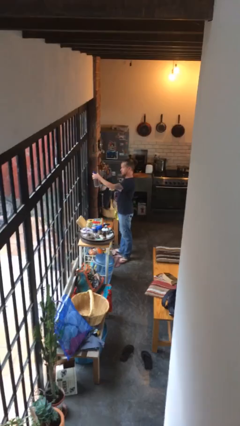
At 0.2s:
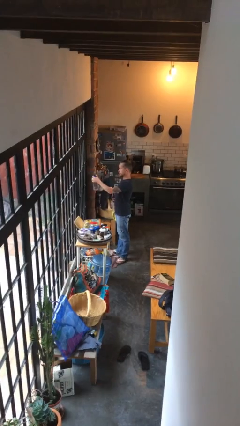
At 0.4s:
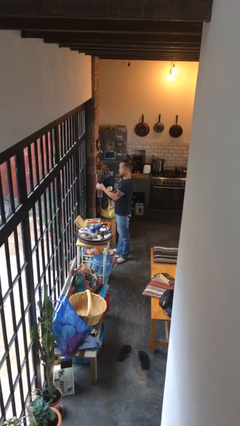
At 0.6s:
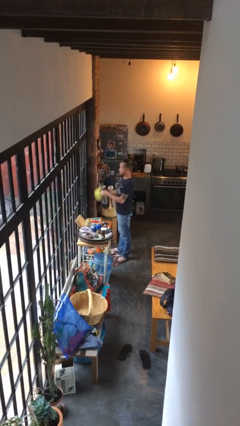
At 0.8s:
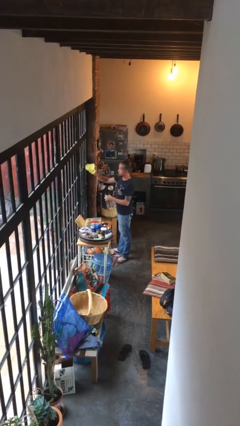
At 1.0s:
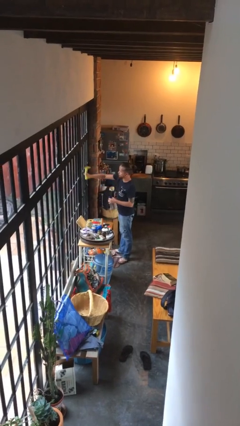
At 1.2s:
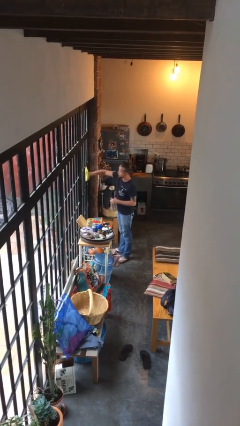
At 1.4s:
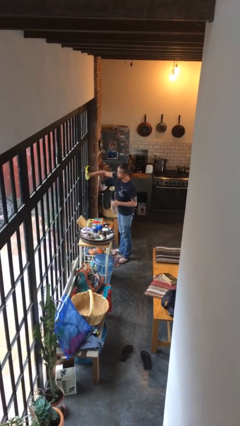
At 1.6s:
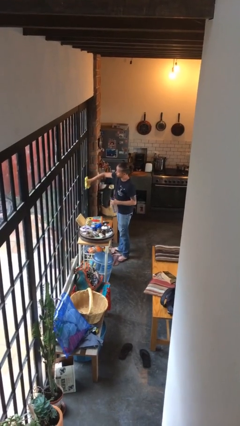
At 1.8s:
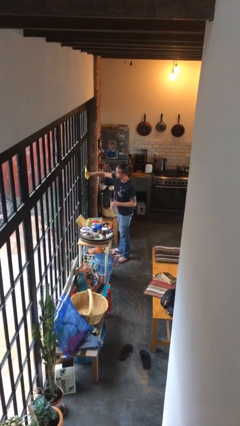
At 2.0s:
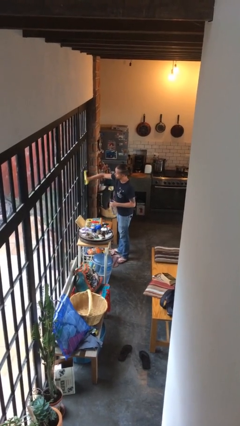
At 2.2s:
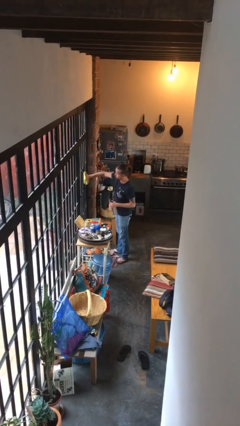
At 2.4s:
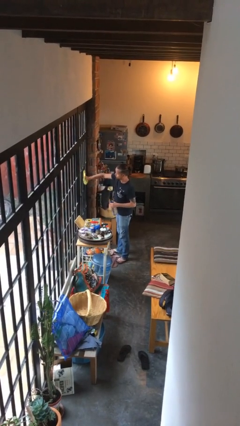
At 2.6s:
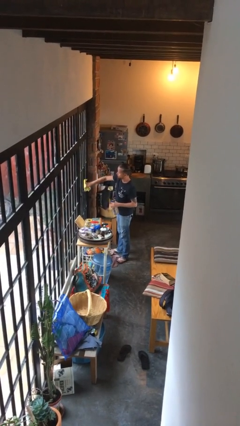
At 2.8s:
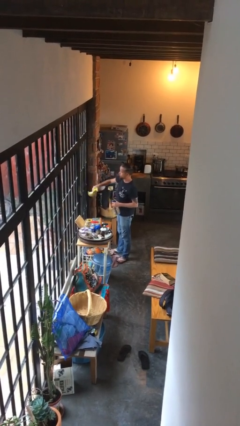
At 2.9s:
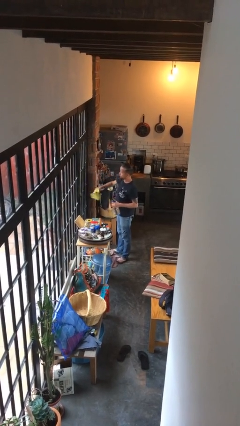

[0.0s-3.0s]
person washes window

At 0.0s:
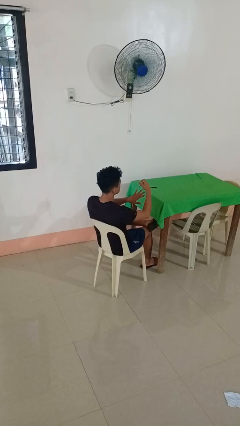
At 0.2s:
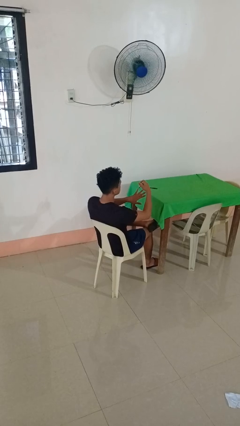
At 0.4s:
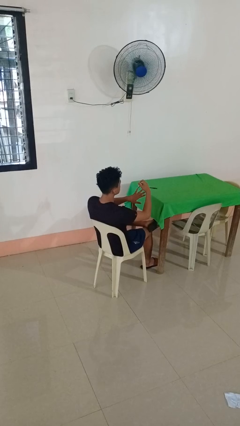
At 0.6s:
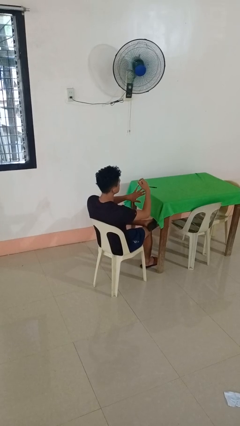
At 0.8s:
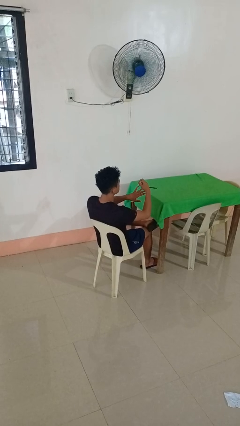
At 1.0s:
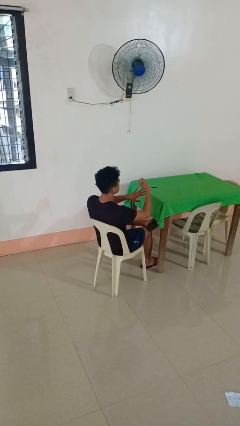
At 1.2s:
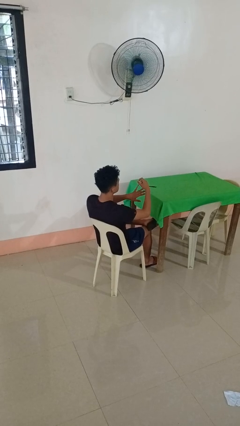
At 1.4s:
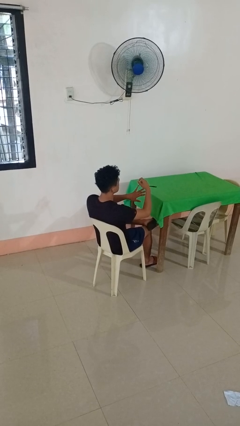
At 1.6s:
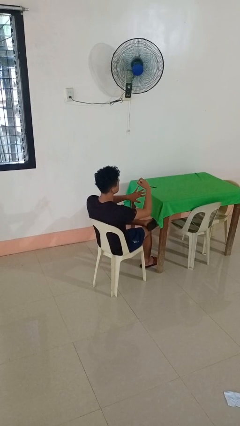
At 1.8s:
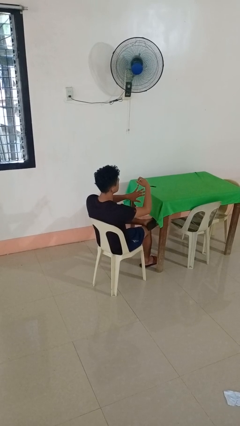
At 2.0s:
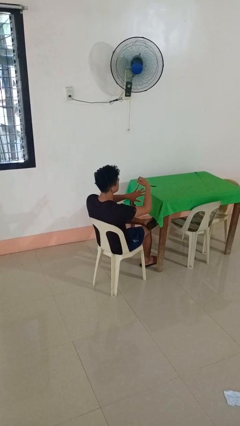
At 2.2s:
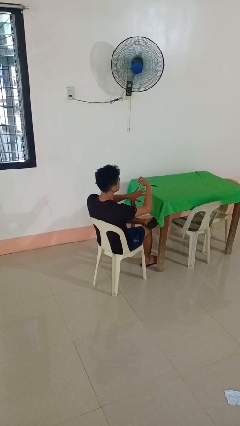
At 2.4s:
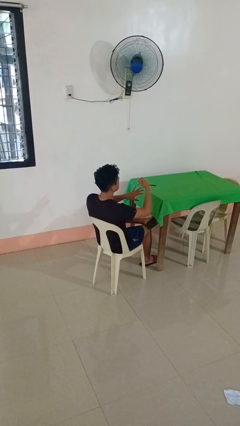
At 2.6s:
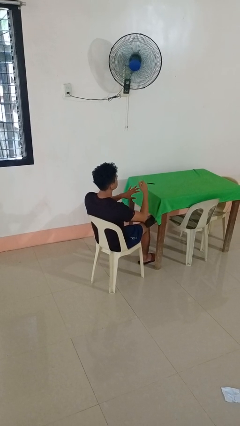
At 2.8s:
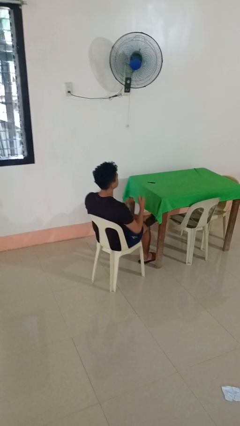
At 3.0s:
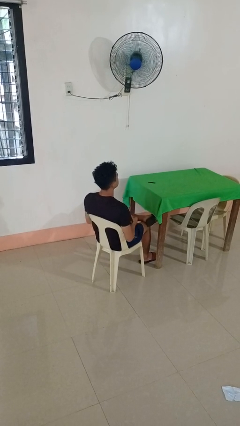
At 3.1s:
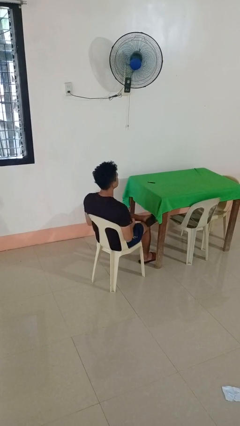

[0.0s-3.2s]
person clips fingernails

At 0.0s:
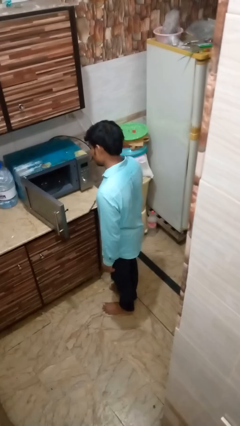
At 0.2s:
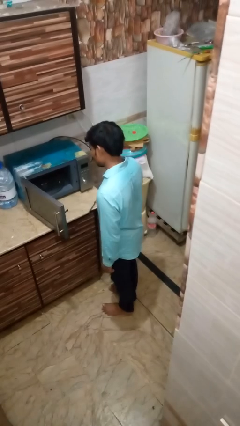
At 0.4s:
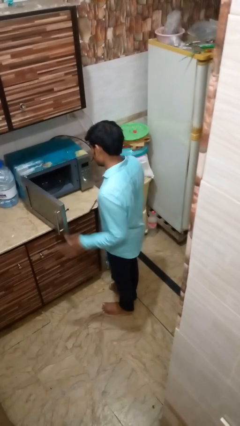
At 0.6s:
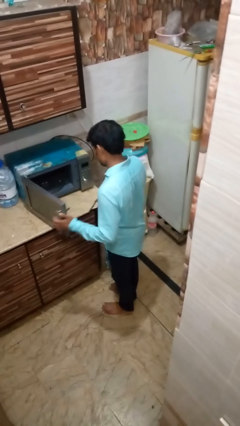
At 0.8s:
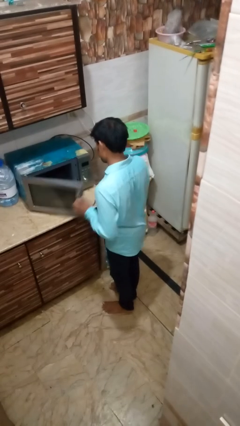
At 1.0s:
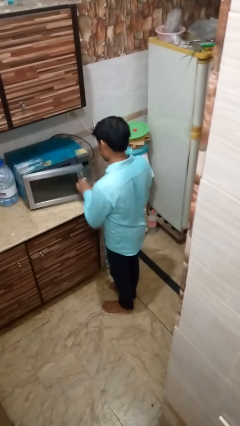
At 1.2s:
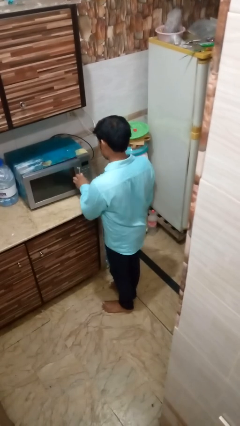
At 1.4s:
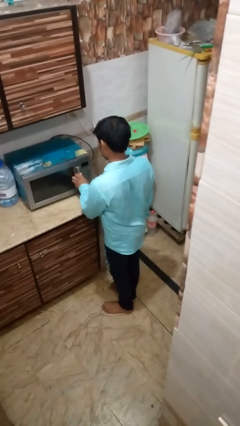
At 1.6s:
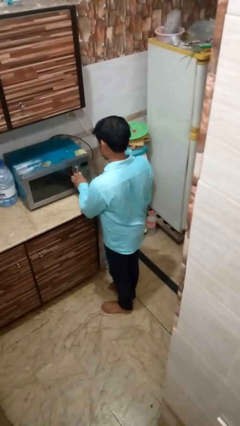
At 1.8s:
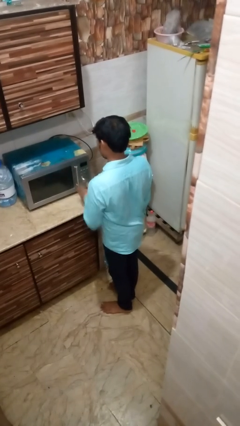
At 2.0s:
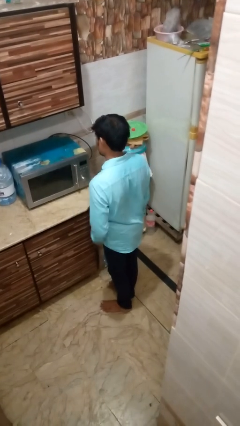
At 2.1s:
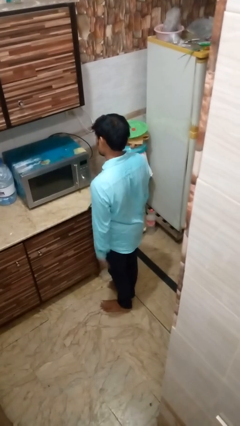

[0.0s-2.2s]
person closes oven door

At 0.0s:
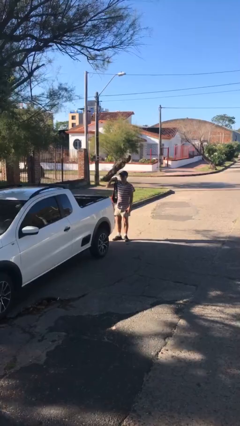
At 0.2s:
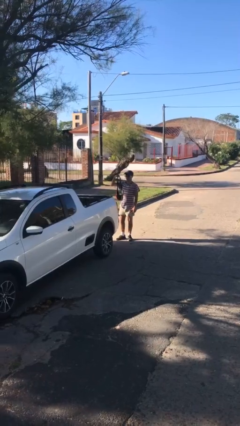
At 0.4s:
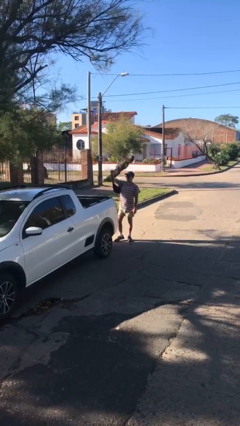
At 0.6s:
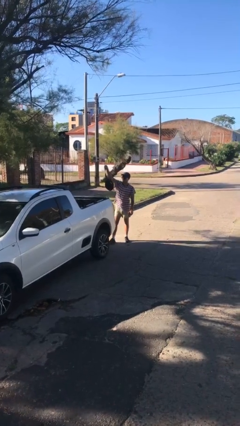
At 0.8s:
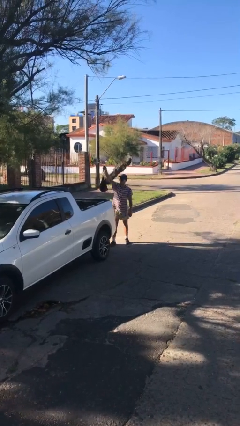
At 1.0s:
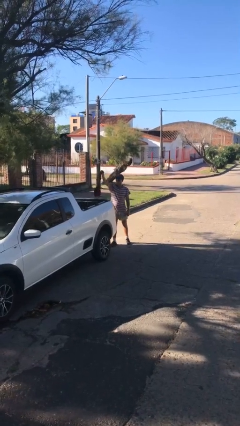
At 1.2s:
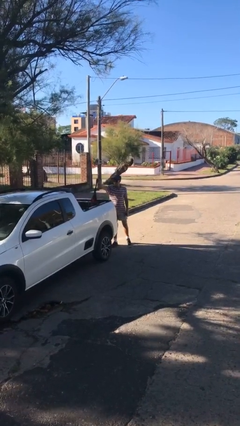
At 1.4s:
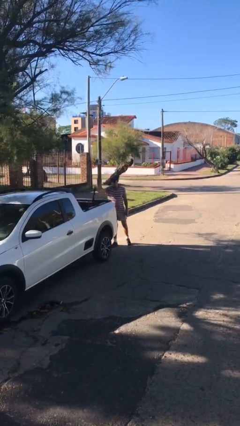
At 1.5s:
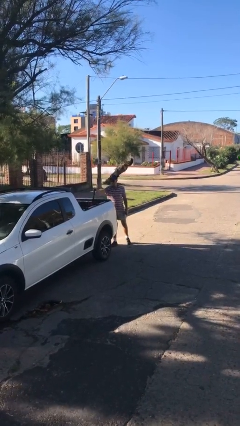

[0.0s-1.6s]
person loads car

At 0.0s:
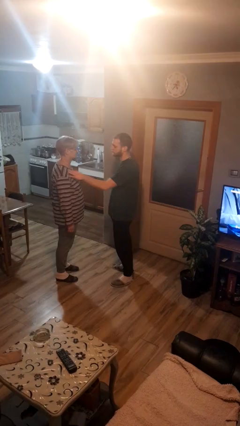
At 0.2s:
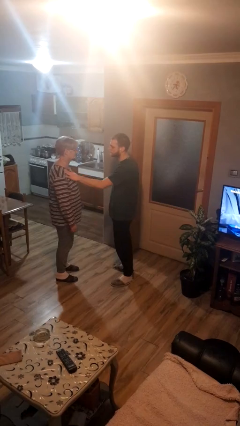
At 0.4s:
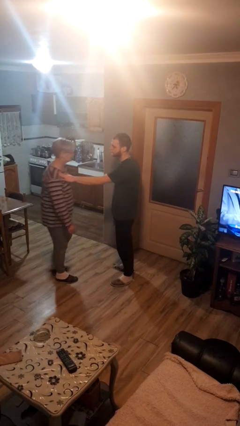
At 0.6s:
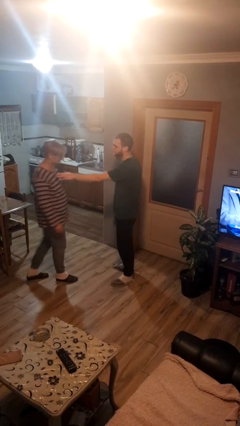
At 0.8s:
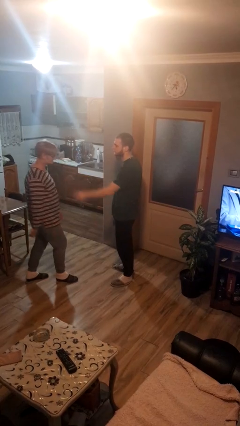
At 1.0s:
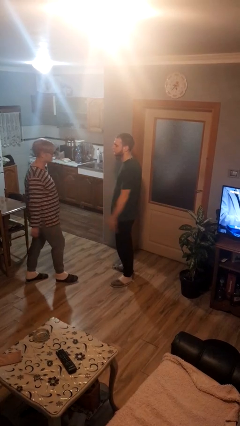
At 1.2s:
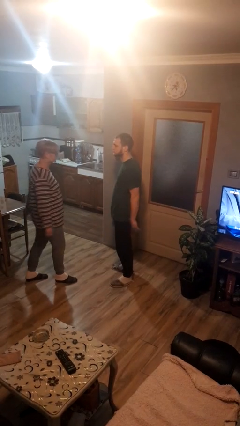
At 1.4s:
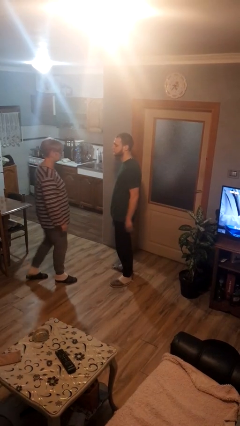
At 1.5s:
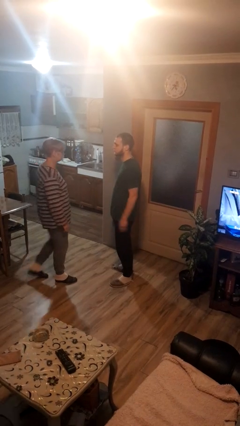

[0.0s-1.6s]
person shoves person

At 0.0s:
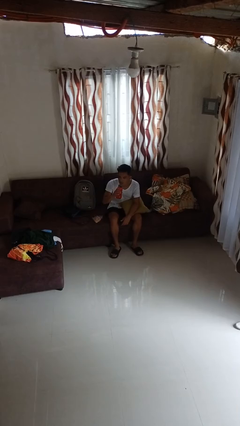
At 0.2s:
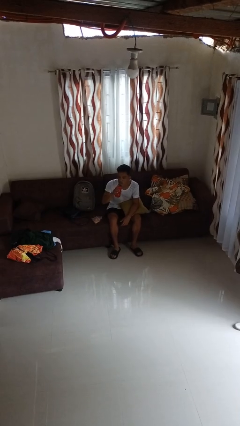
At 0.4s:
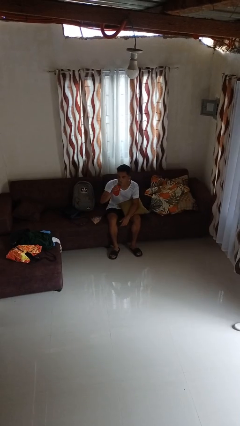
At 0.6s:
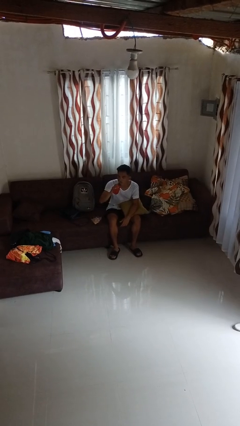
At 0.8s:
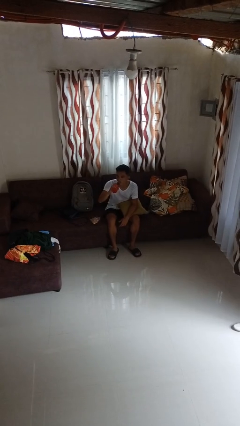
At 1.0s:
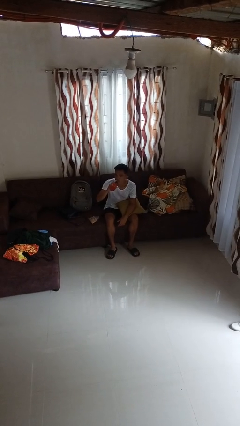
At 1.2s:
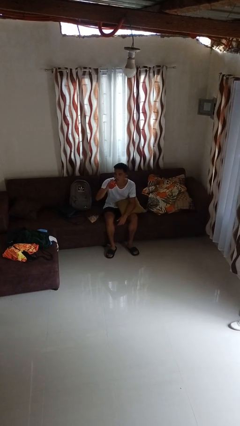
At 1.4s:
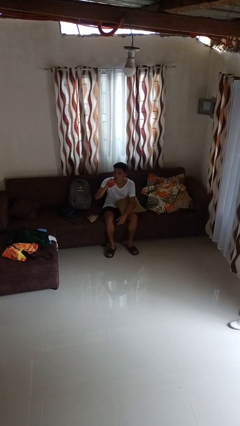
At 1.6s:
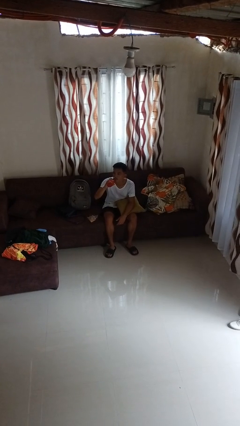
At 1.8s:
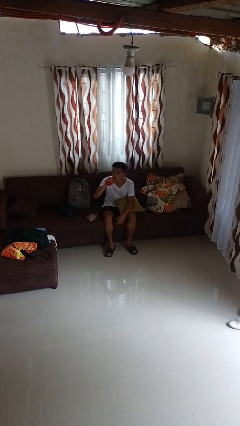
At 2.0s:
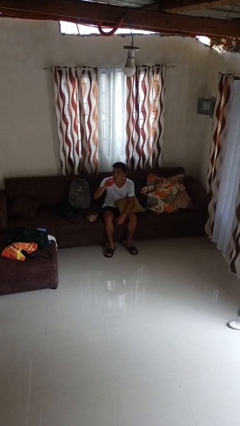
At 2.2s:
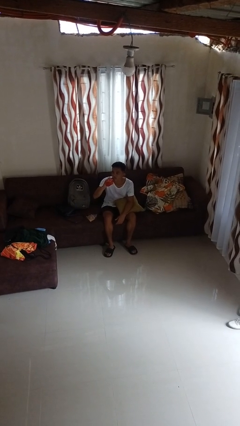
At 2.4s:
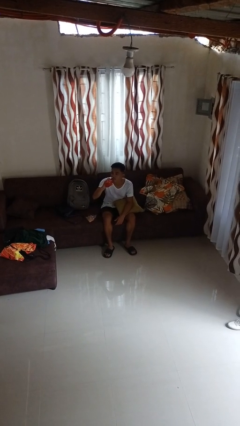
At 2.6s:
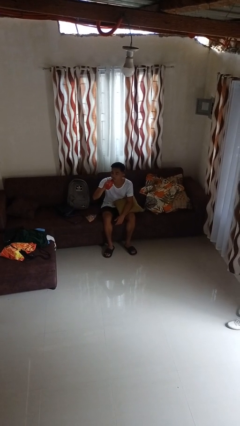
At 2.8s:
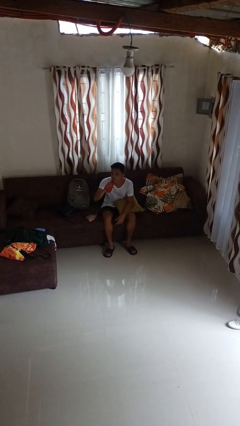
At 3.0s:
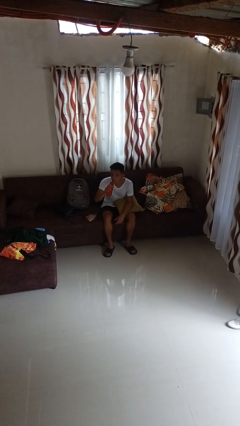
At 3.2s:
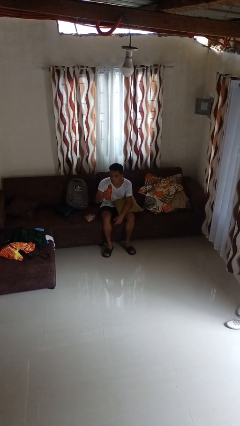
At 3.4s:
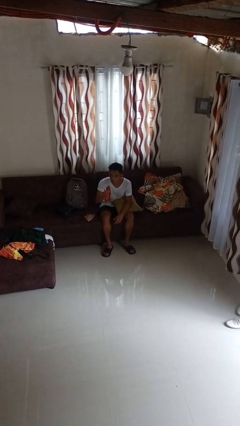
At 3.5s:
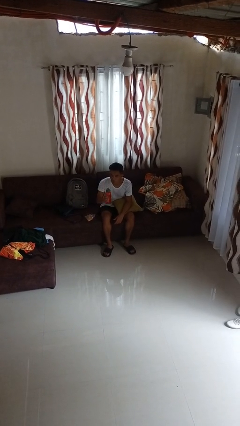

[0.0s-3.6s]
person drinks from bottle

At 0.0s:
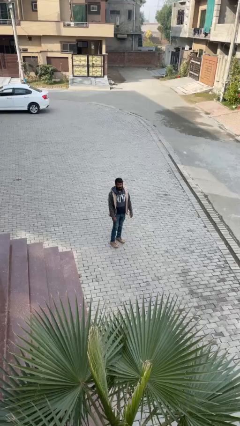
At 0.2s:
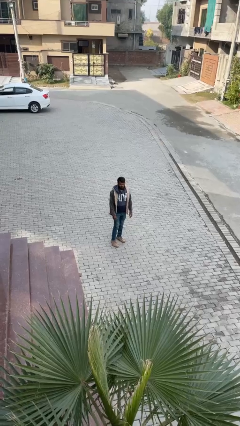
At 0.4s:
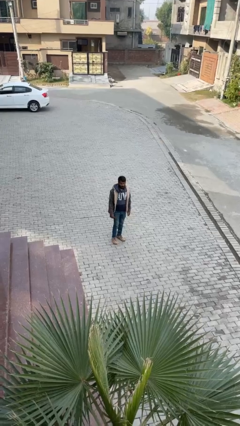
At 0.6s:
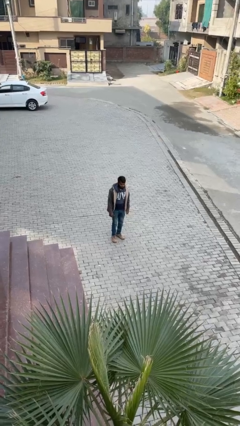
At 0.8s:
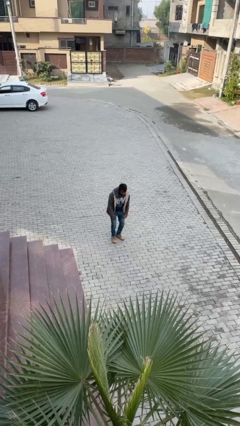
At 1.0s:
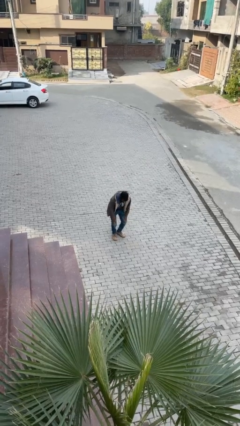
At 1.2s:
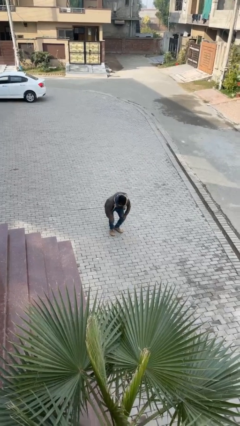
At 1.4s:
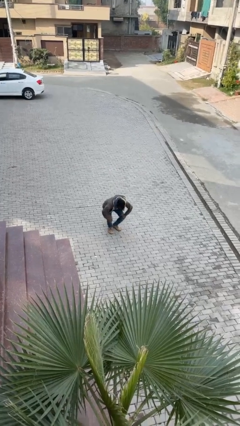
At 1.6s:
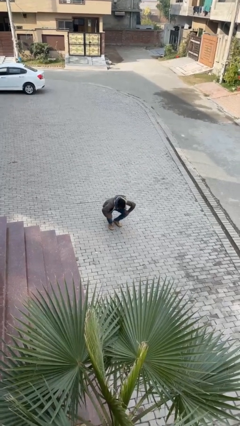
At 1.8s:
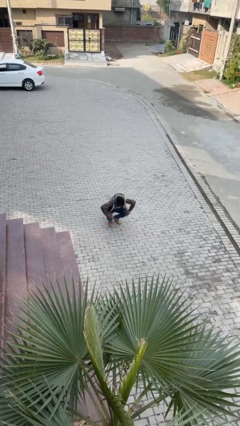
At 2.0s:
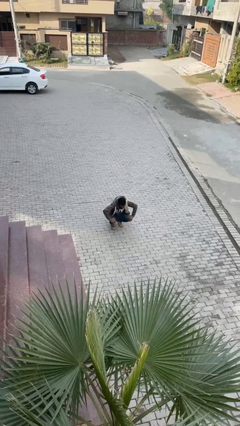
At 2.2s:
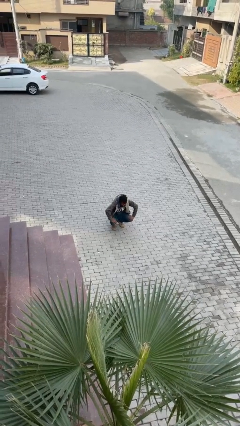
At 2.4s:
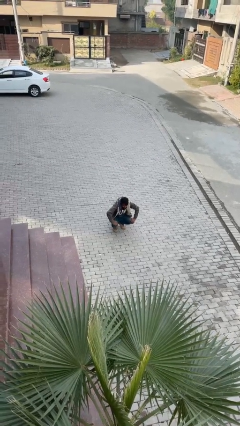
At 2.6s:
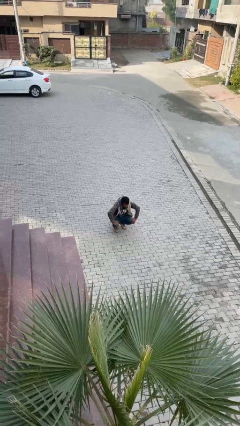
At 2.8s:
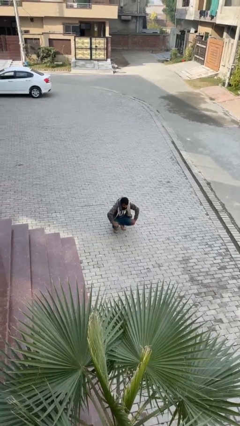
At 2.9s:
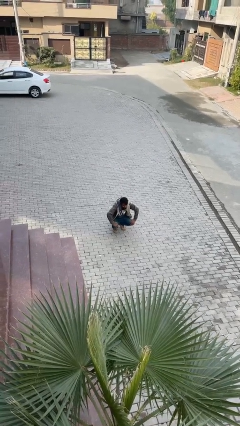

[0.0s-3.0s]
person sits down
